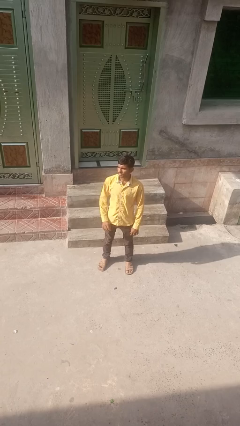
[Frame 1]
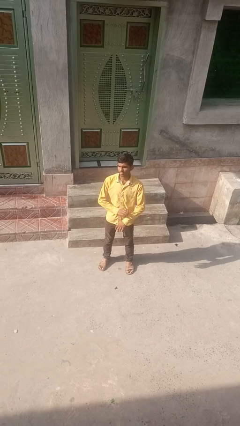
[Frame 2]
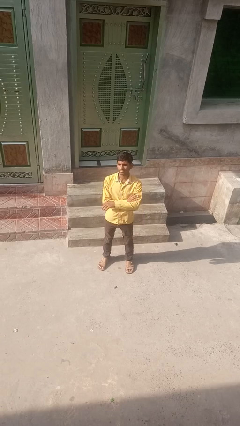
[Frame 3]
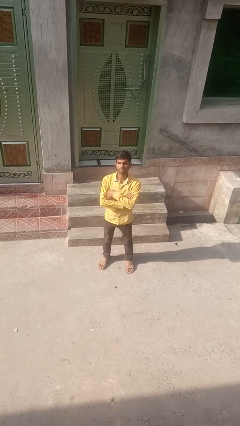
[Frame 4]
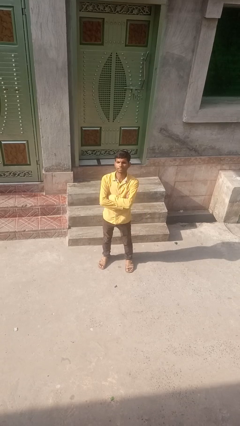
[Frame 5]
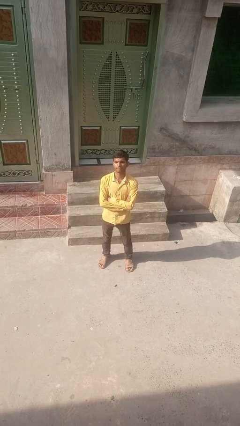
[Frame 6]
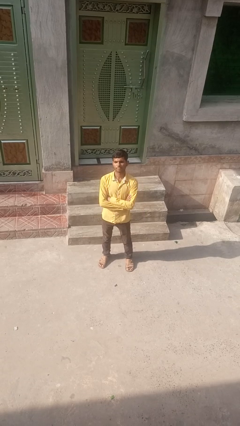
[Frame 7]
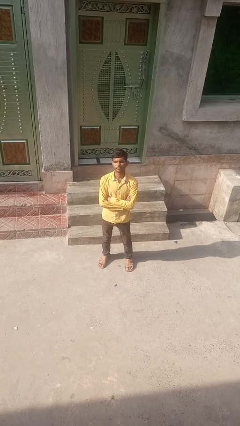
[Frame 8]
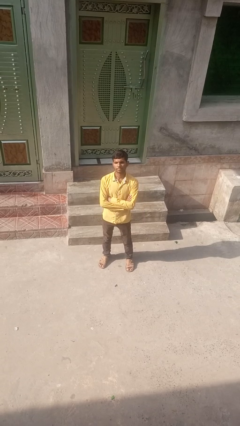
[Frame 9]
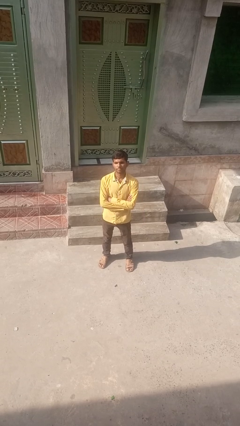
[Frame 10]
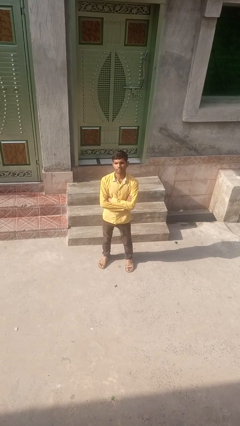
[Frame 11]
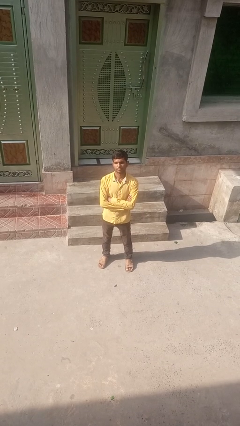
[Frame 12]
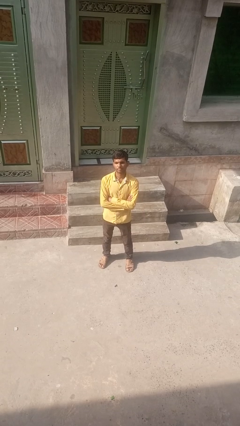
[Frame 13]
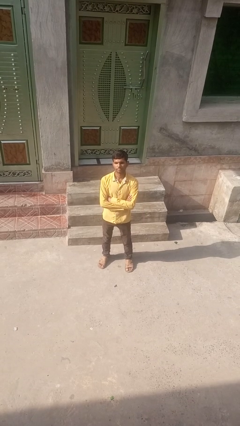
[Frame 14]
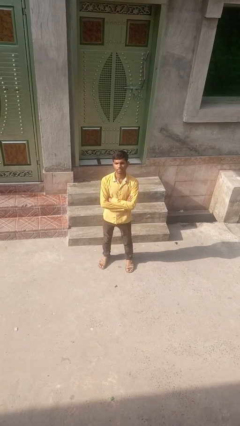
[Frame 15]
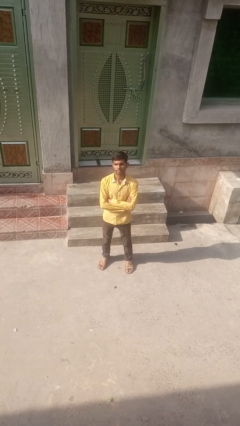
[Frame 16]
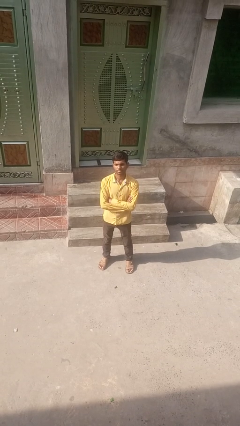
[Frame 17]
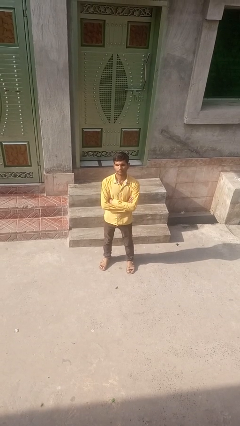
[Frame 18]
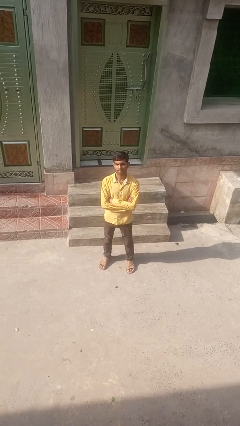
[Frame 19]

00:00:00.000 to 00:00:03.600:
person crosses arms

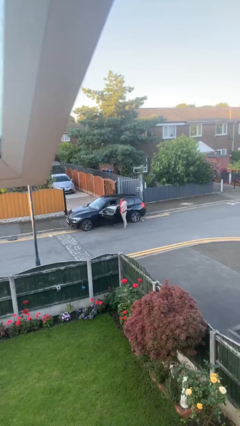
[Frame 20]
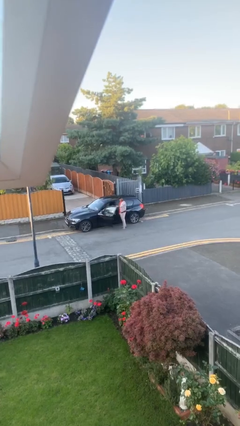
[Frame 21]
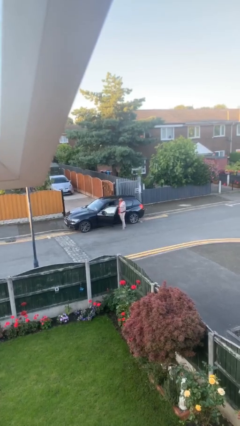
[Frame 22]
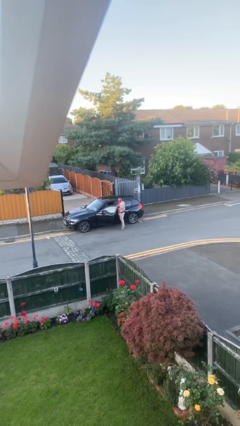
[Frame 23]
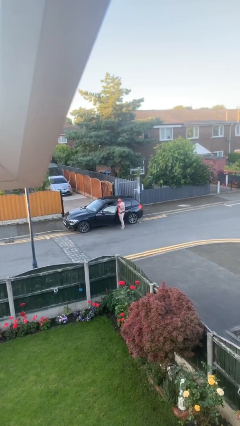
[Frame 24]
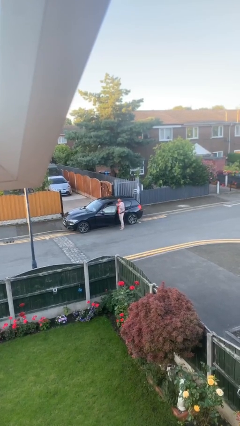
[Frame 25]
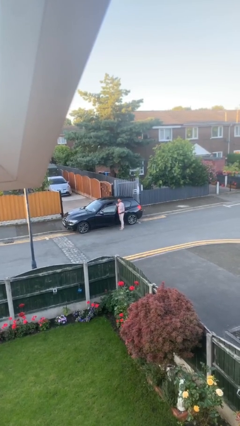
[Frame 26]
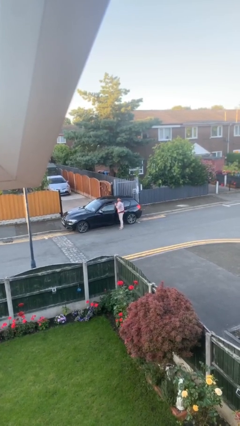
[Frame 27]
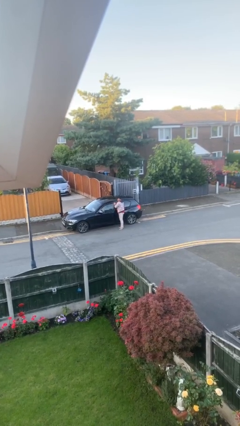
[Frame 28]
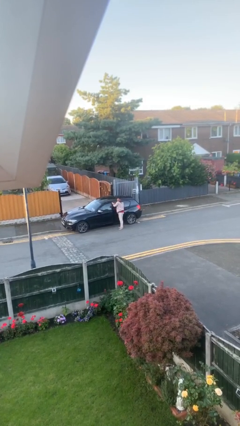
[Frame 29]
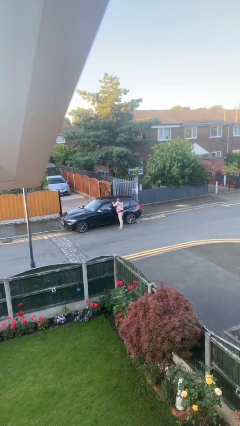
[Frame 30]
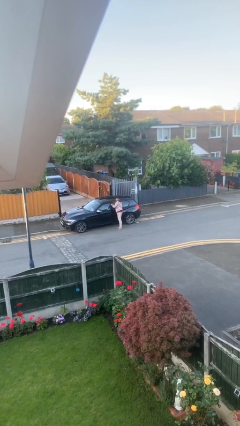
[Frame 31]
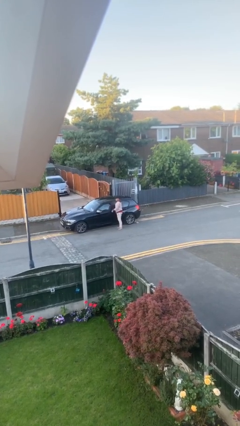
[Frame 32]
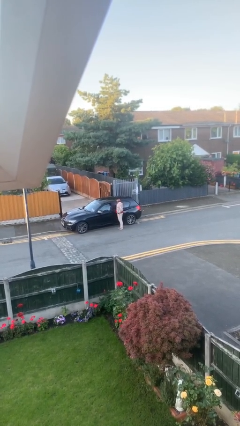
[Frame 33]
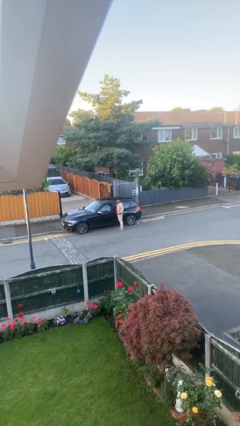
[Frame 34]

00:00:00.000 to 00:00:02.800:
person closes car door

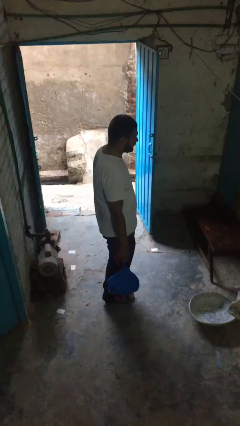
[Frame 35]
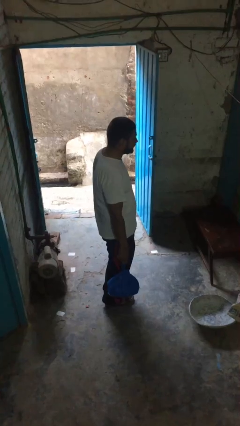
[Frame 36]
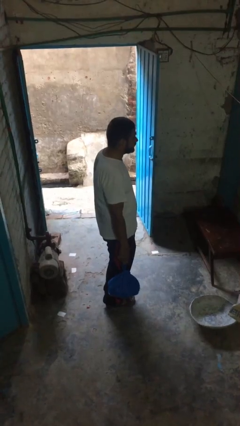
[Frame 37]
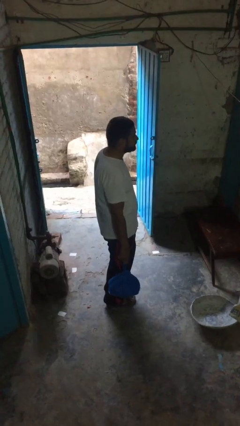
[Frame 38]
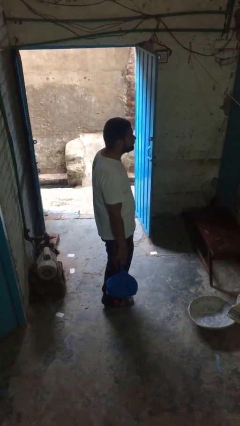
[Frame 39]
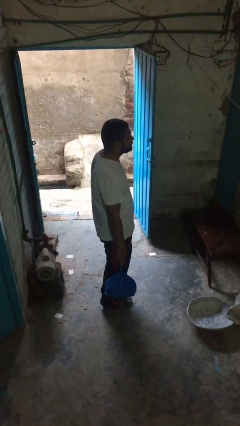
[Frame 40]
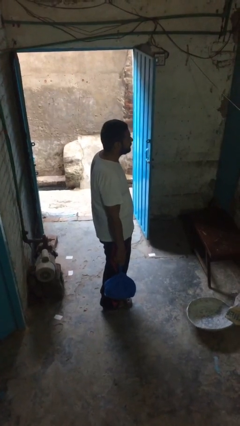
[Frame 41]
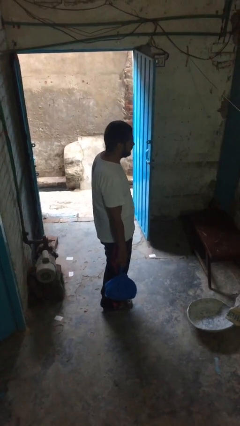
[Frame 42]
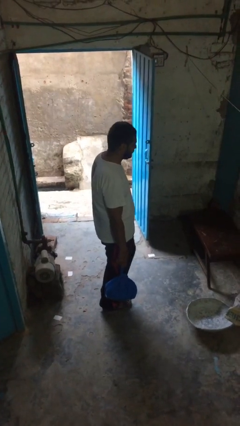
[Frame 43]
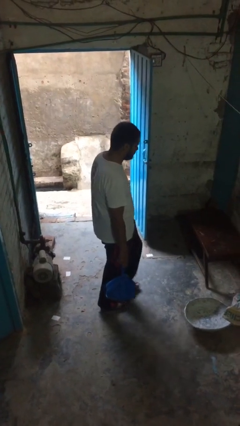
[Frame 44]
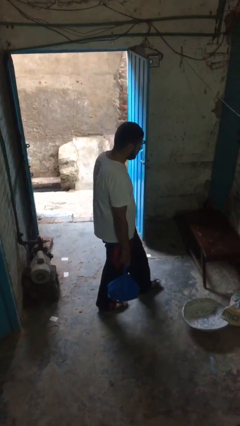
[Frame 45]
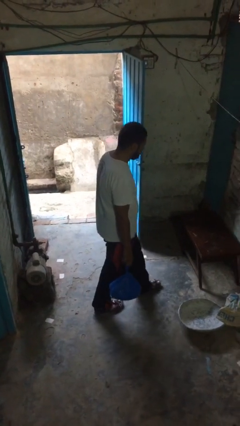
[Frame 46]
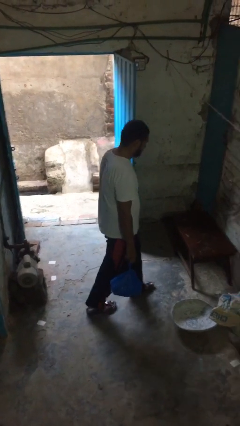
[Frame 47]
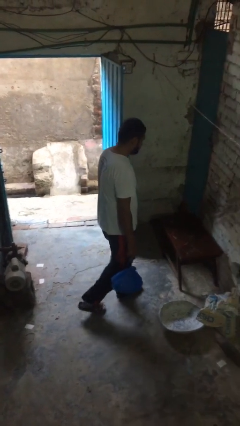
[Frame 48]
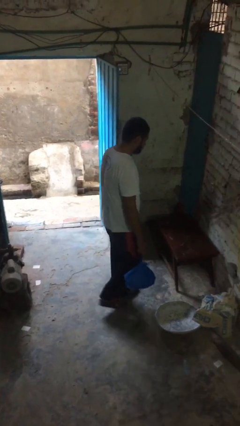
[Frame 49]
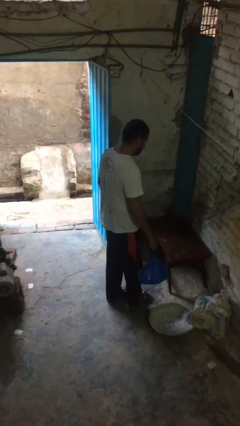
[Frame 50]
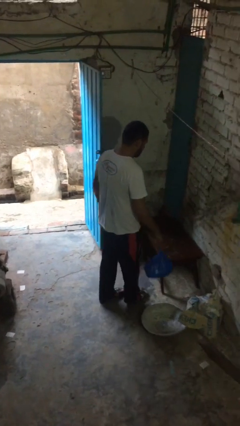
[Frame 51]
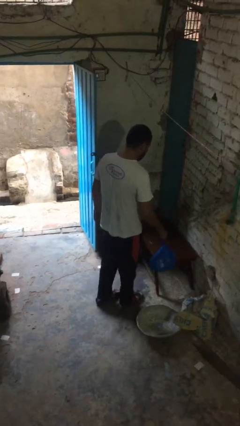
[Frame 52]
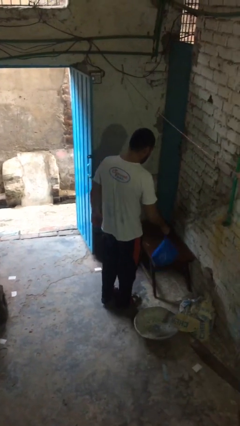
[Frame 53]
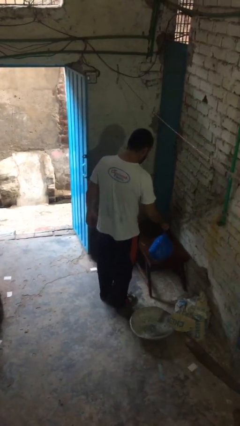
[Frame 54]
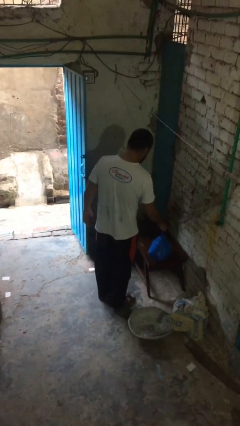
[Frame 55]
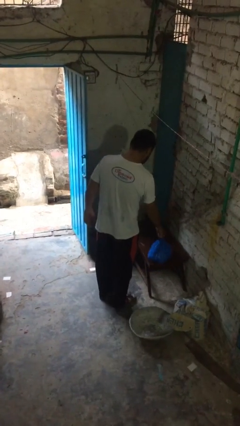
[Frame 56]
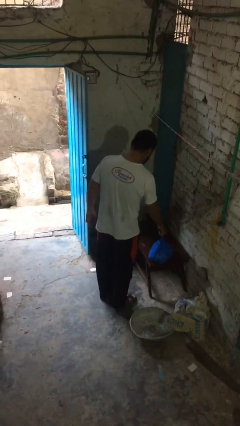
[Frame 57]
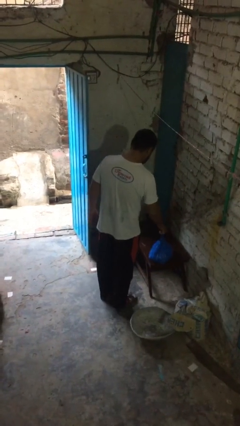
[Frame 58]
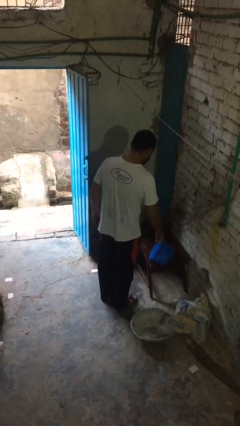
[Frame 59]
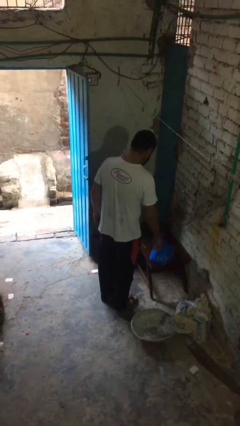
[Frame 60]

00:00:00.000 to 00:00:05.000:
person puts down object on table

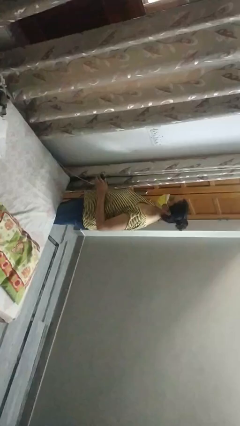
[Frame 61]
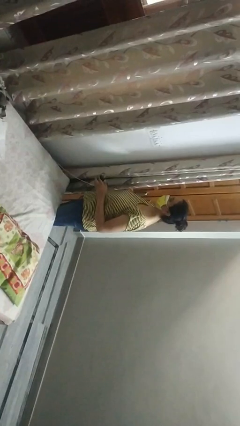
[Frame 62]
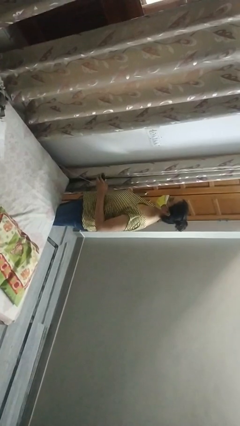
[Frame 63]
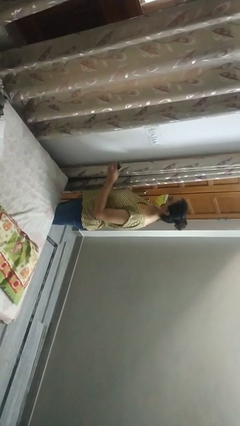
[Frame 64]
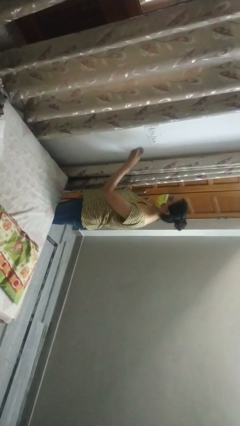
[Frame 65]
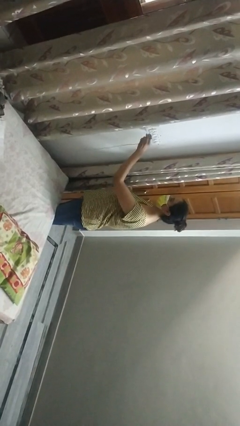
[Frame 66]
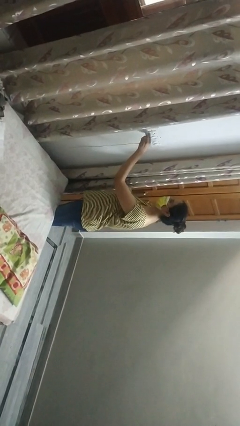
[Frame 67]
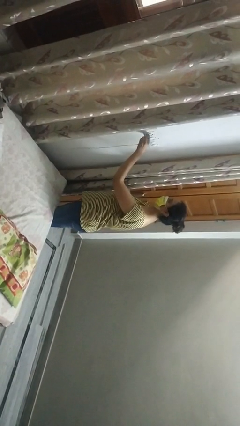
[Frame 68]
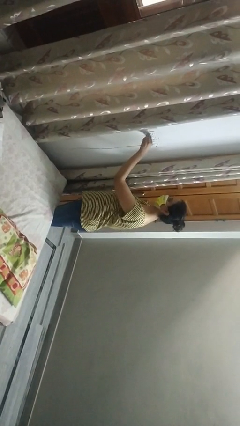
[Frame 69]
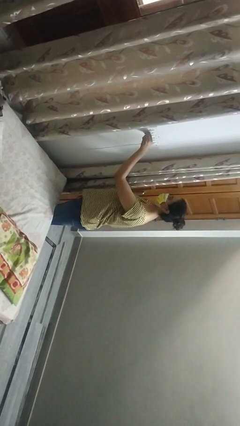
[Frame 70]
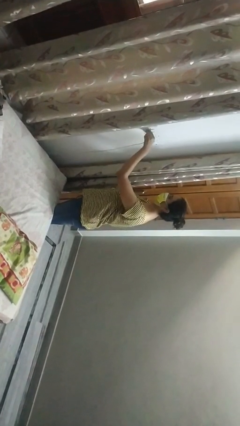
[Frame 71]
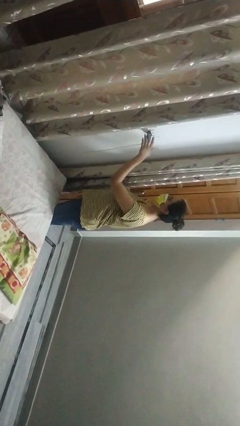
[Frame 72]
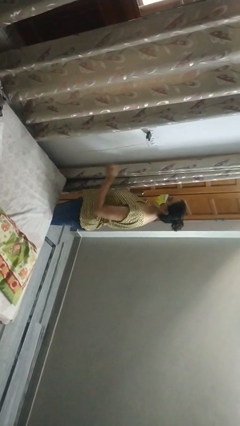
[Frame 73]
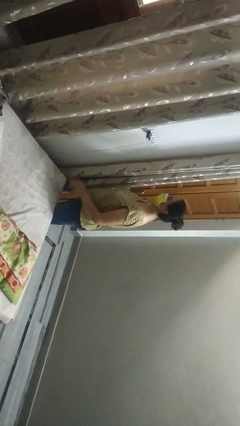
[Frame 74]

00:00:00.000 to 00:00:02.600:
person plugs into electrical socket

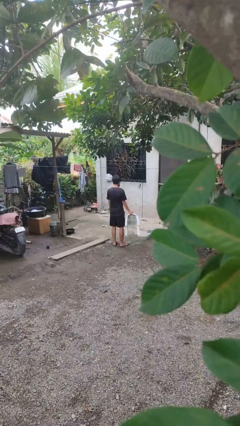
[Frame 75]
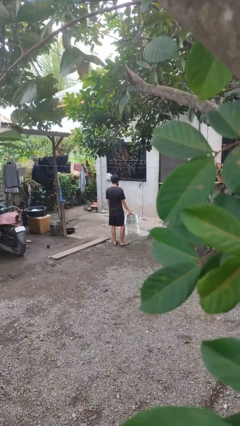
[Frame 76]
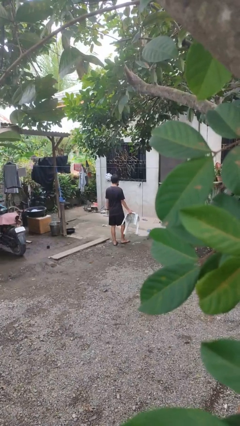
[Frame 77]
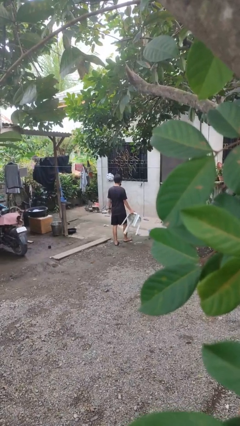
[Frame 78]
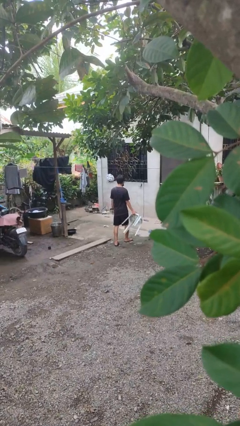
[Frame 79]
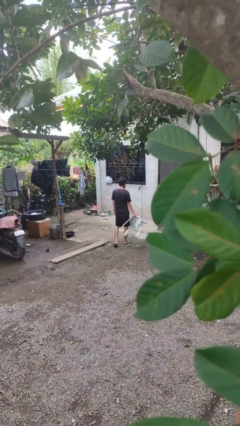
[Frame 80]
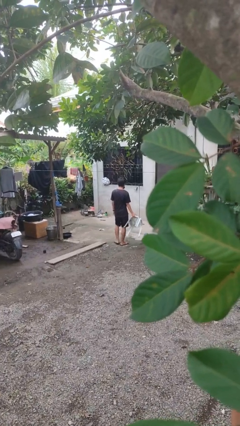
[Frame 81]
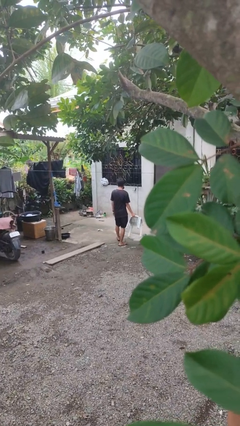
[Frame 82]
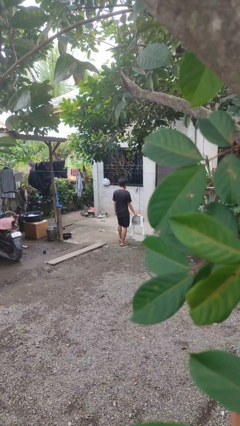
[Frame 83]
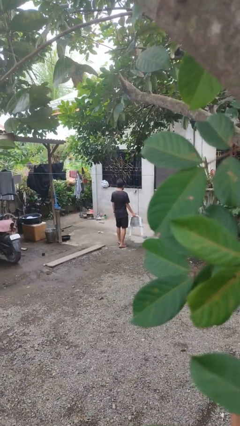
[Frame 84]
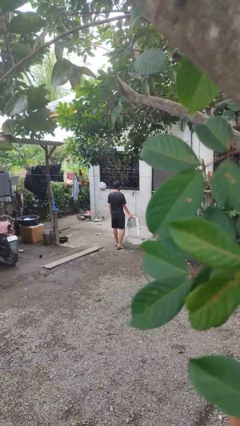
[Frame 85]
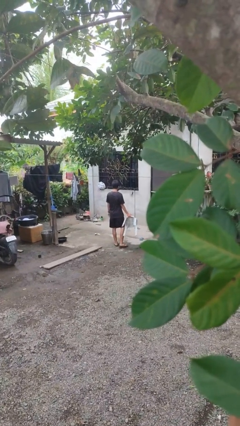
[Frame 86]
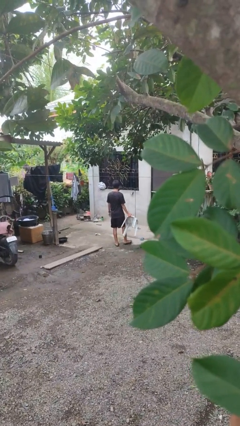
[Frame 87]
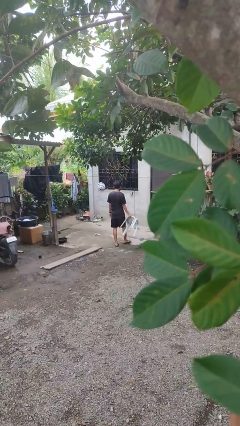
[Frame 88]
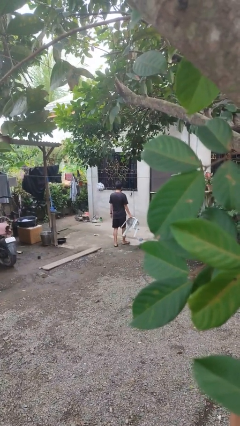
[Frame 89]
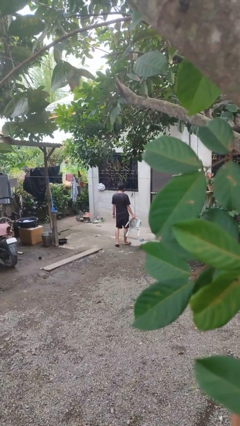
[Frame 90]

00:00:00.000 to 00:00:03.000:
person carries furniture
